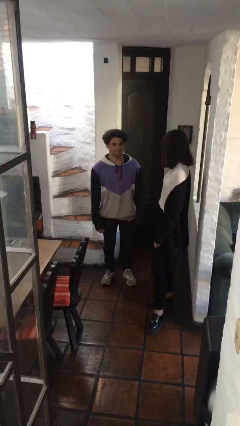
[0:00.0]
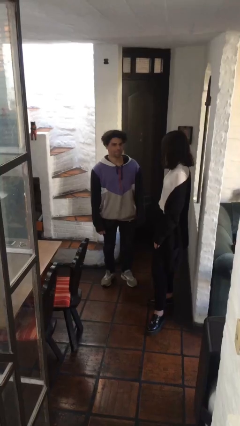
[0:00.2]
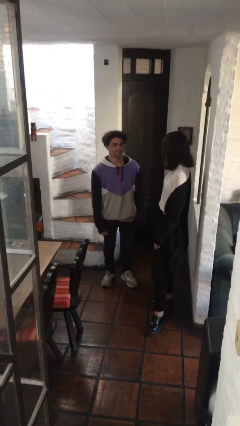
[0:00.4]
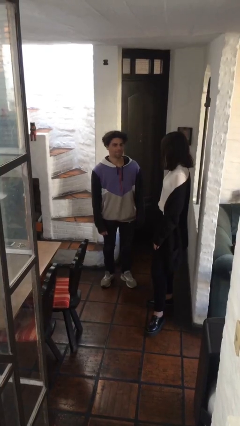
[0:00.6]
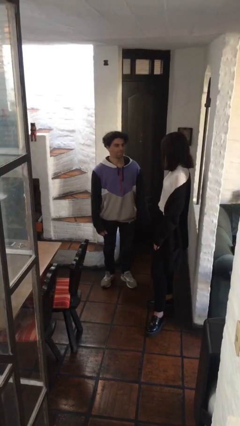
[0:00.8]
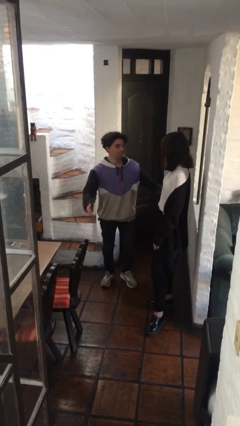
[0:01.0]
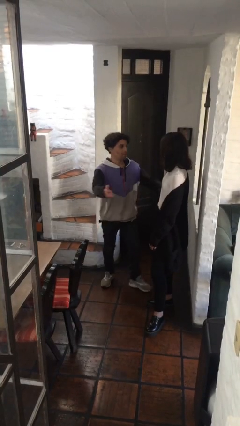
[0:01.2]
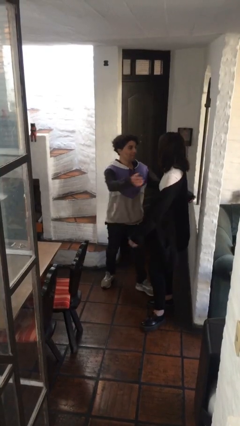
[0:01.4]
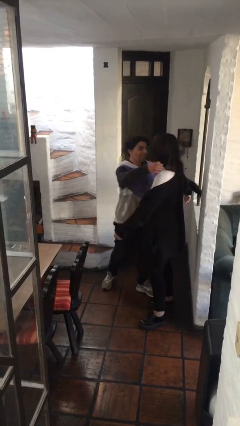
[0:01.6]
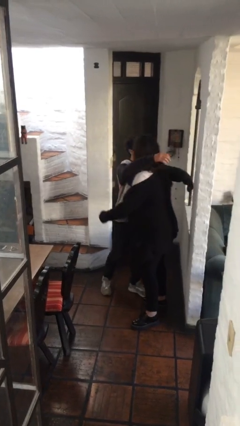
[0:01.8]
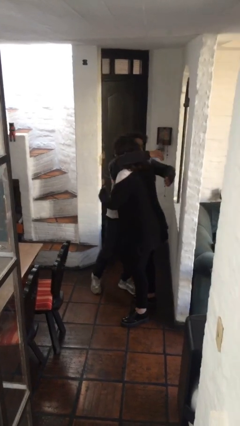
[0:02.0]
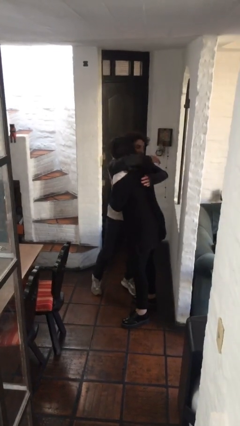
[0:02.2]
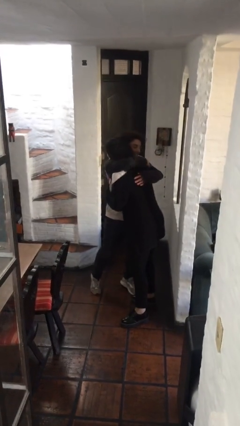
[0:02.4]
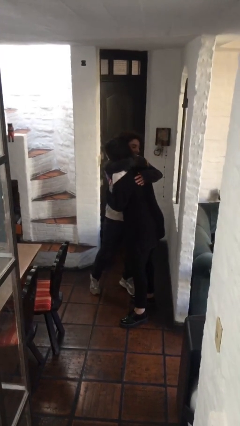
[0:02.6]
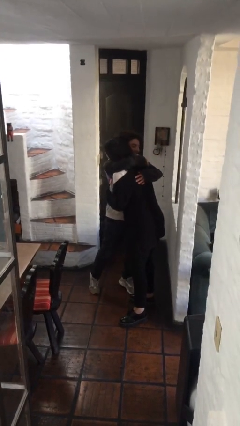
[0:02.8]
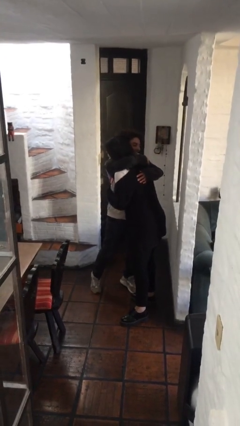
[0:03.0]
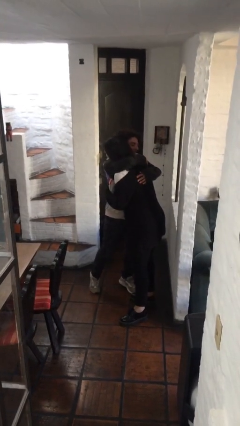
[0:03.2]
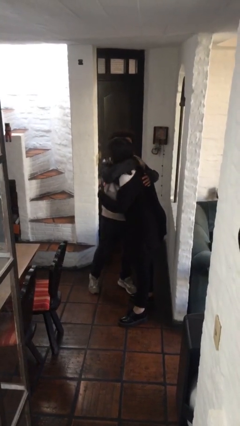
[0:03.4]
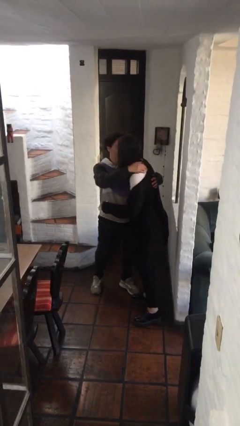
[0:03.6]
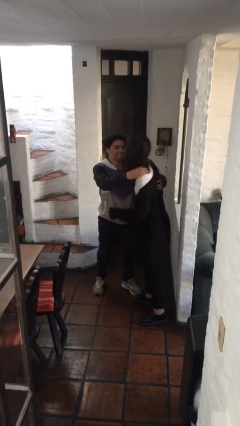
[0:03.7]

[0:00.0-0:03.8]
person embraces person

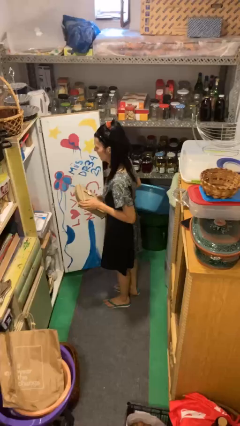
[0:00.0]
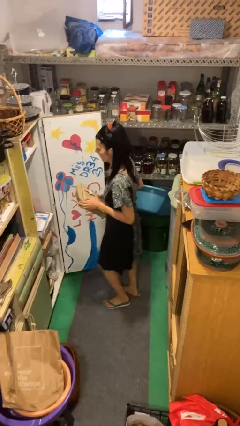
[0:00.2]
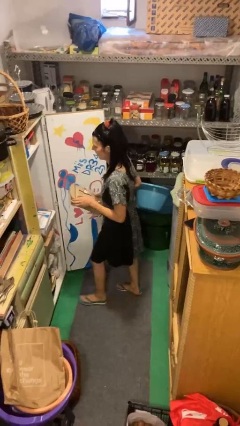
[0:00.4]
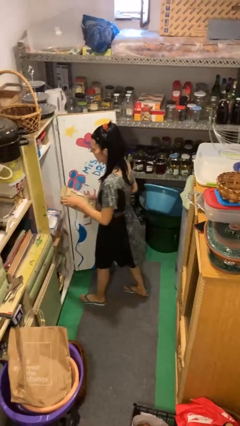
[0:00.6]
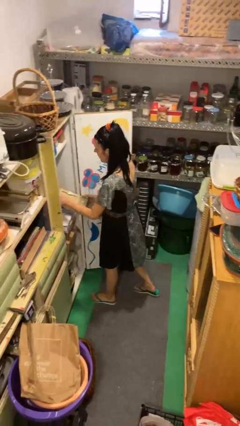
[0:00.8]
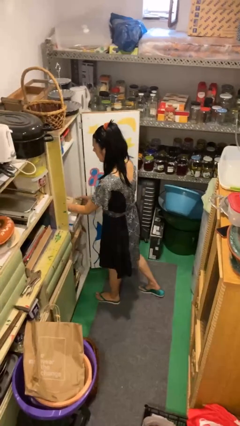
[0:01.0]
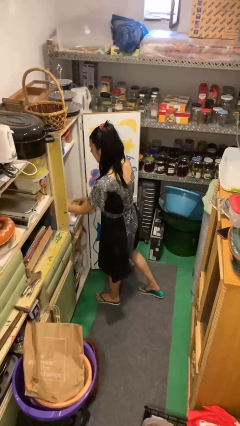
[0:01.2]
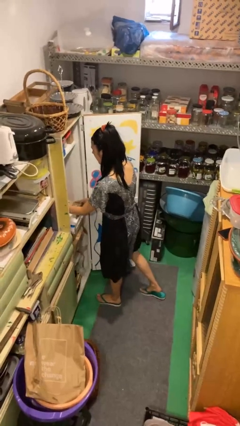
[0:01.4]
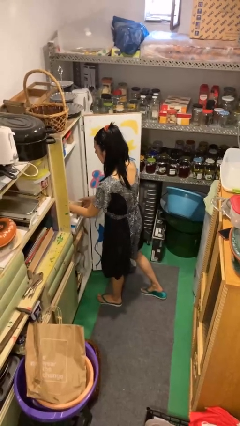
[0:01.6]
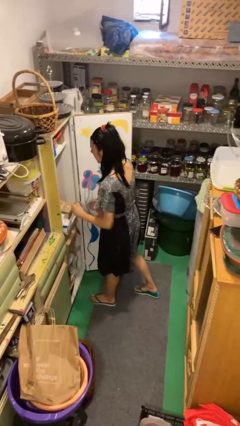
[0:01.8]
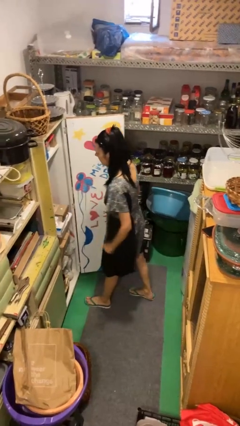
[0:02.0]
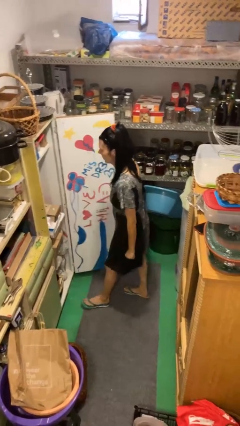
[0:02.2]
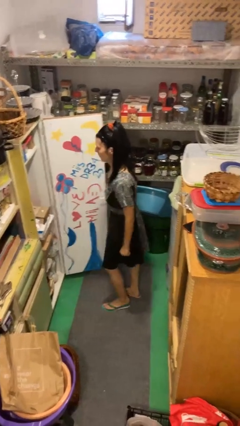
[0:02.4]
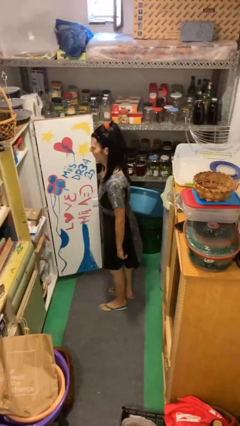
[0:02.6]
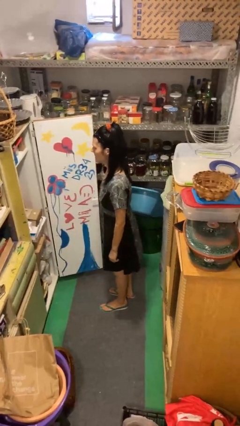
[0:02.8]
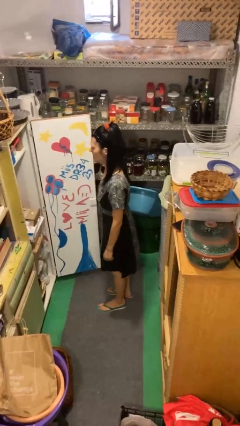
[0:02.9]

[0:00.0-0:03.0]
person puts down object into cabinet

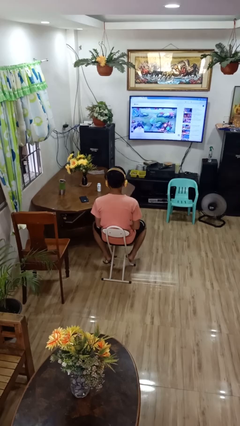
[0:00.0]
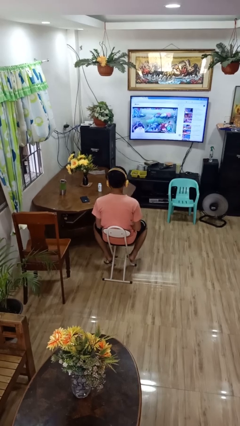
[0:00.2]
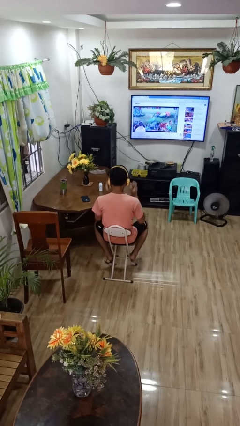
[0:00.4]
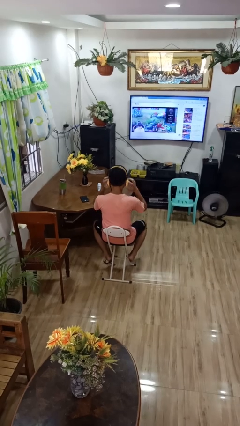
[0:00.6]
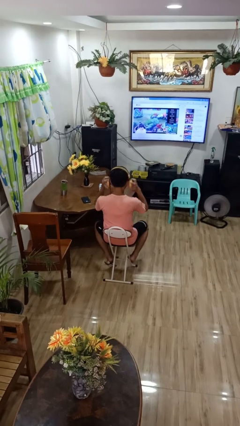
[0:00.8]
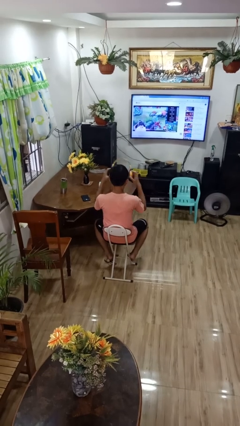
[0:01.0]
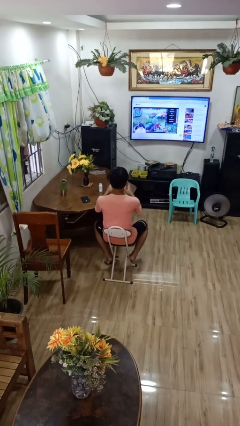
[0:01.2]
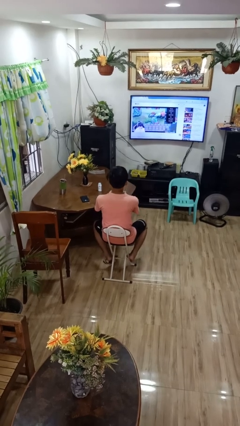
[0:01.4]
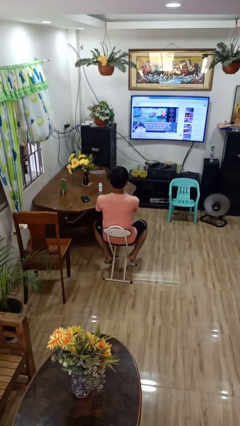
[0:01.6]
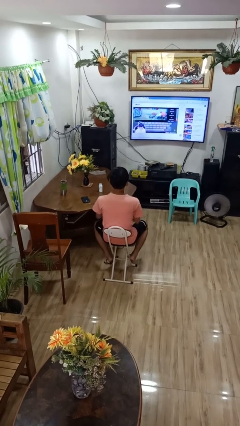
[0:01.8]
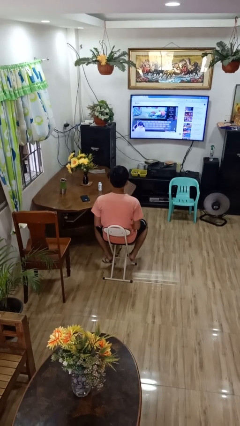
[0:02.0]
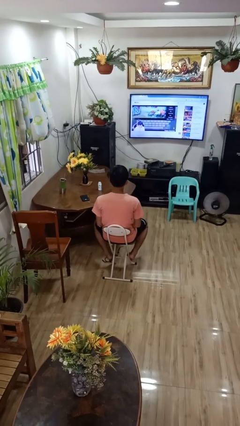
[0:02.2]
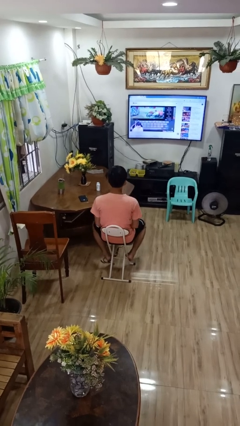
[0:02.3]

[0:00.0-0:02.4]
person takes off headphones

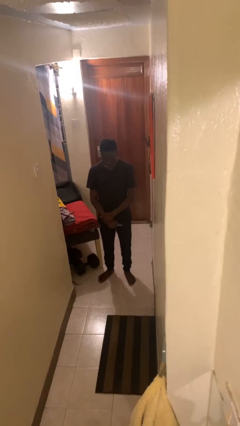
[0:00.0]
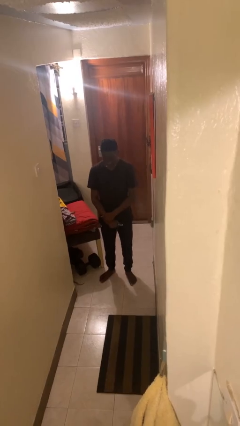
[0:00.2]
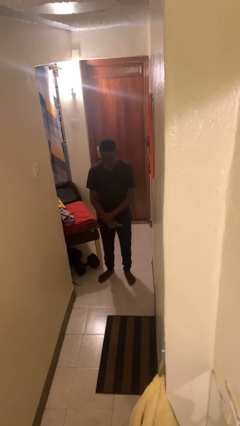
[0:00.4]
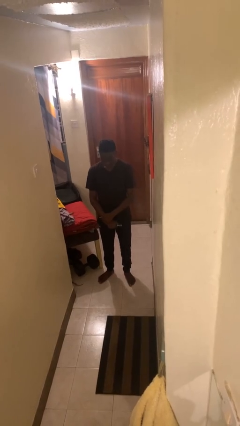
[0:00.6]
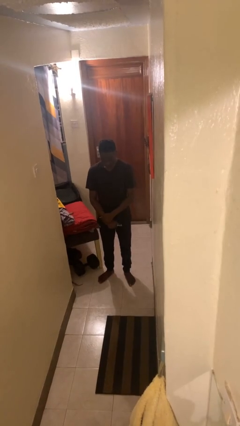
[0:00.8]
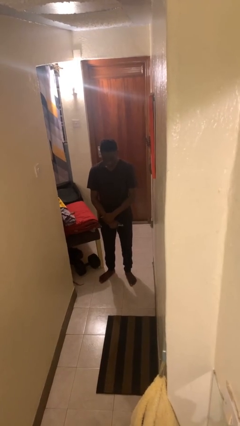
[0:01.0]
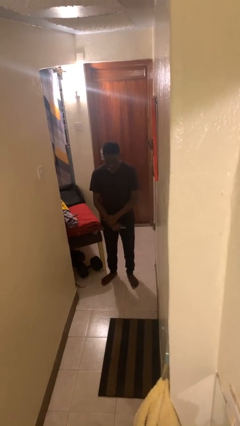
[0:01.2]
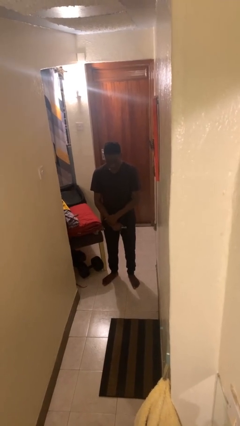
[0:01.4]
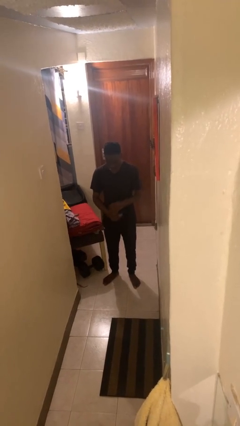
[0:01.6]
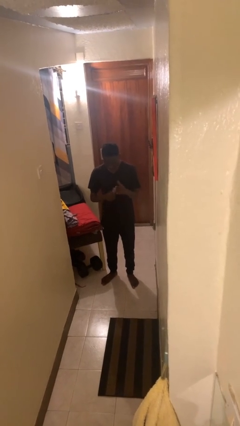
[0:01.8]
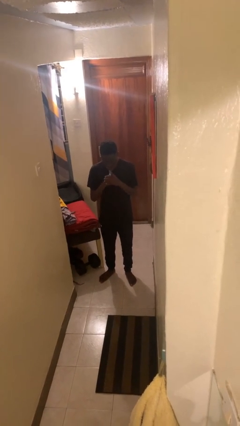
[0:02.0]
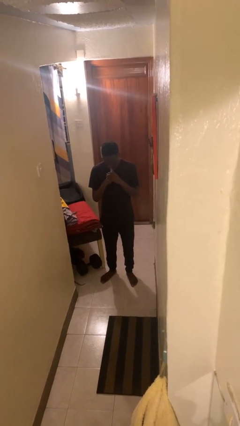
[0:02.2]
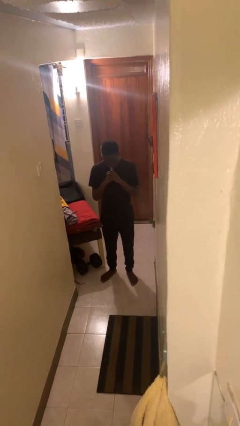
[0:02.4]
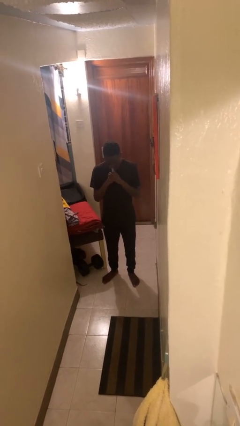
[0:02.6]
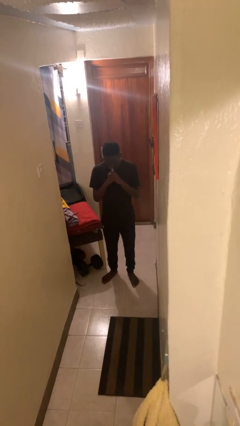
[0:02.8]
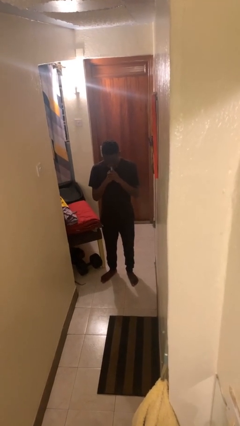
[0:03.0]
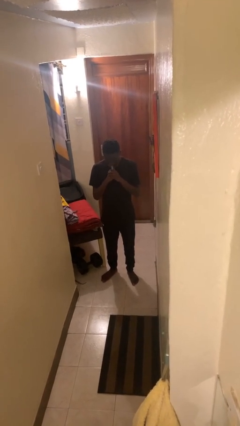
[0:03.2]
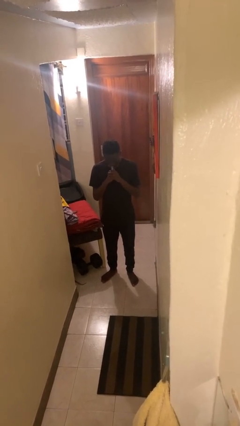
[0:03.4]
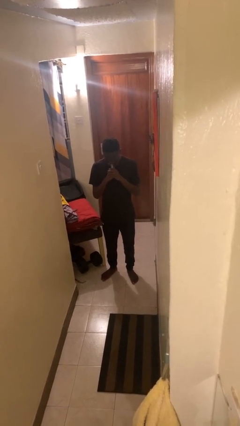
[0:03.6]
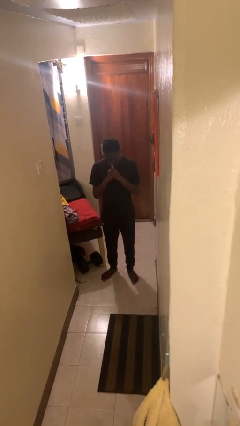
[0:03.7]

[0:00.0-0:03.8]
person vapes

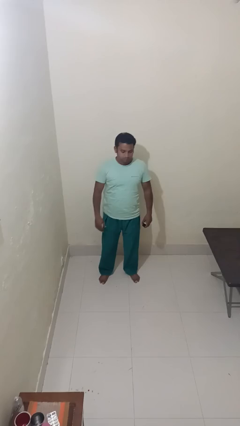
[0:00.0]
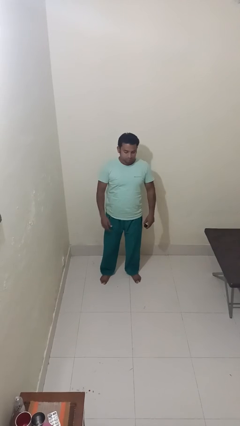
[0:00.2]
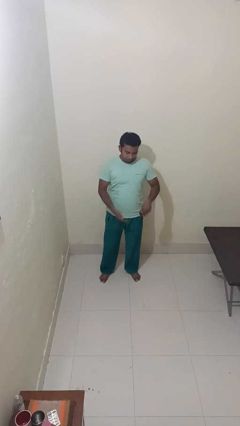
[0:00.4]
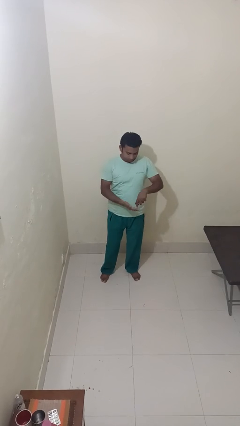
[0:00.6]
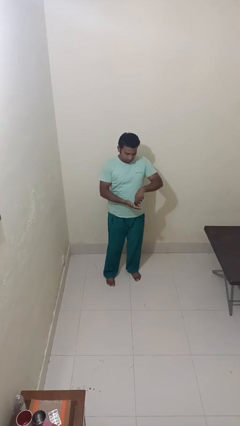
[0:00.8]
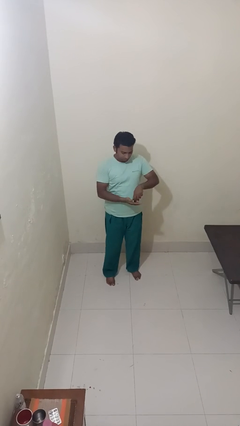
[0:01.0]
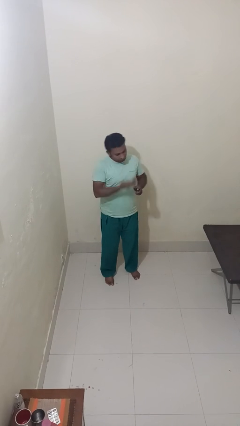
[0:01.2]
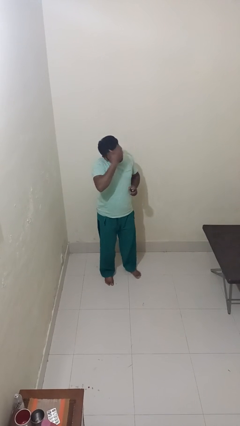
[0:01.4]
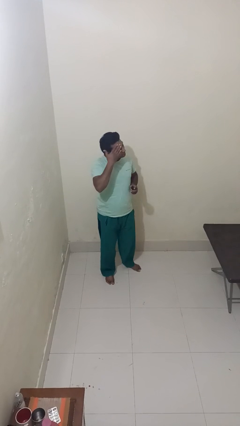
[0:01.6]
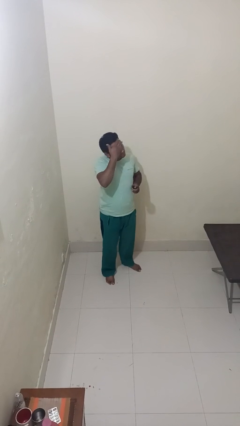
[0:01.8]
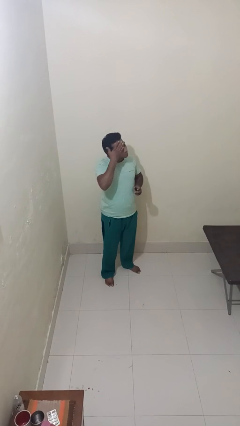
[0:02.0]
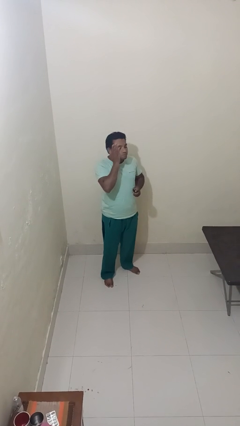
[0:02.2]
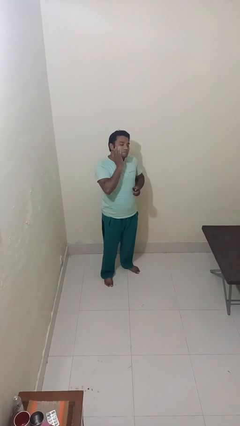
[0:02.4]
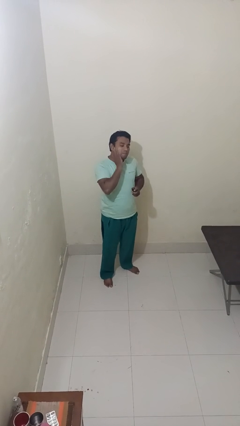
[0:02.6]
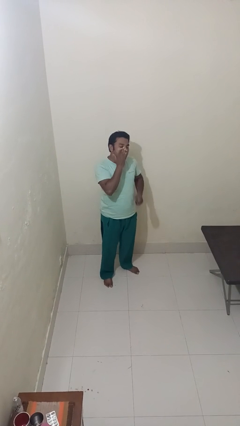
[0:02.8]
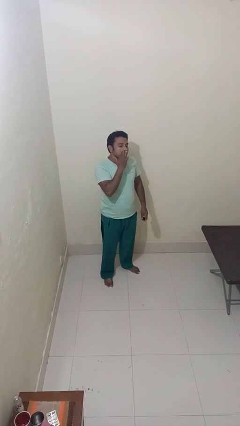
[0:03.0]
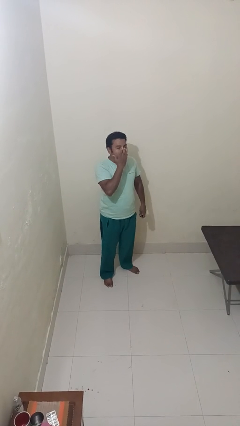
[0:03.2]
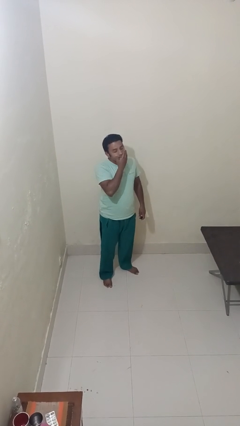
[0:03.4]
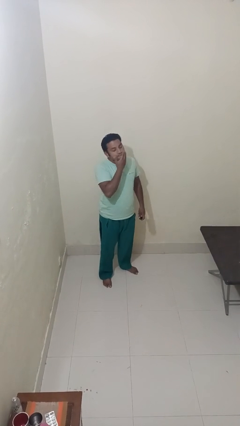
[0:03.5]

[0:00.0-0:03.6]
person applies facial moisturizer

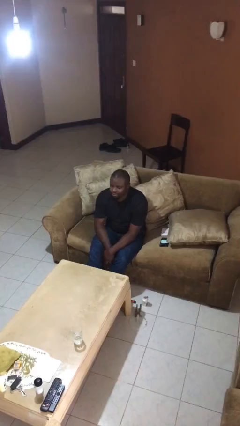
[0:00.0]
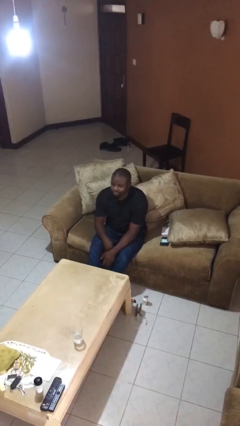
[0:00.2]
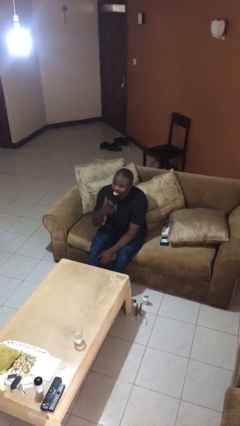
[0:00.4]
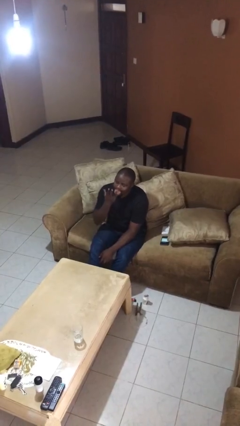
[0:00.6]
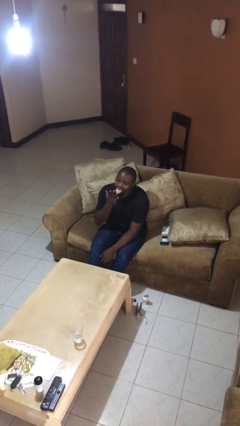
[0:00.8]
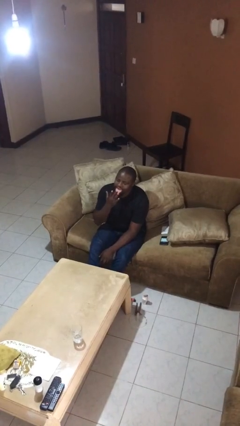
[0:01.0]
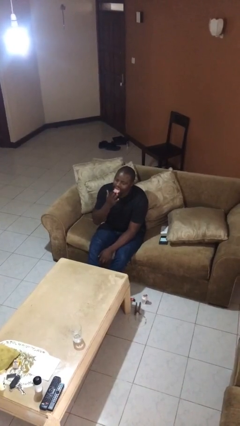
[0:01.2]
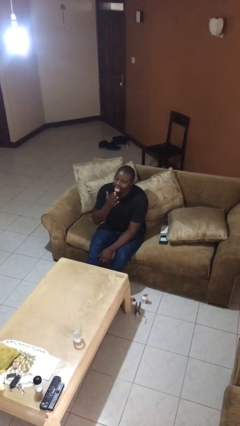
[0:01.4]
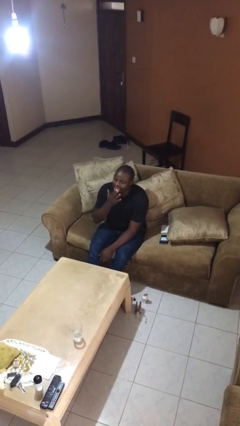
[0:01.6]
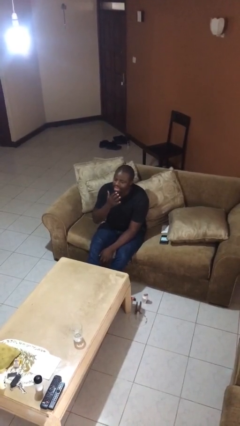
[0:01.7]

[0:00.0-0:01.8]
person licks fingers
